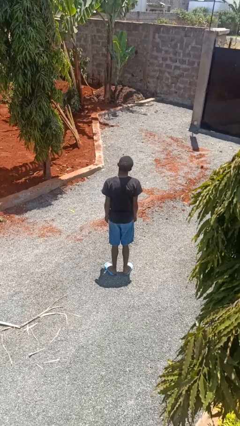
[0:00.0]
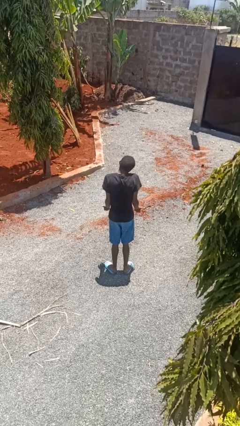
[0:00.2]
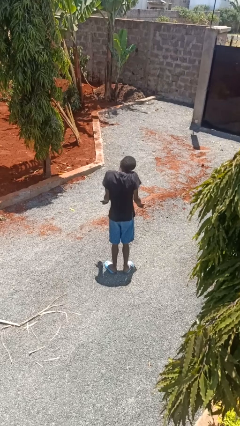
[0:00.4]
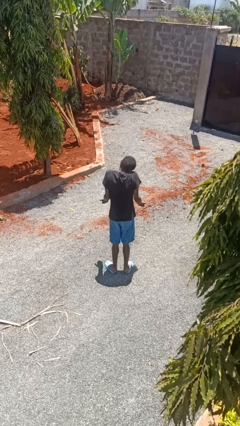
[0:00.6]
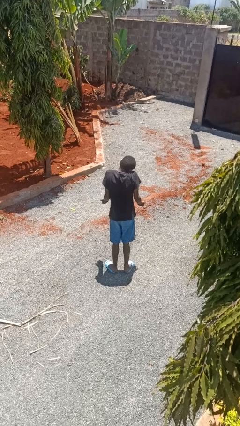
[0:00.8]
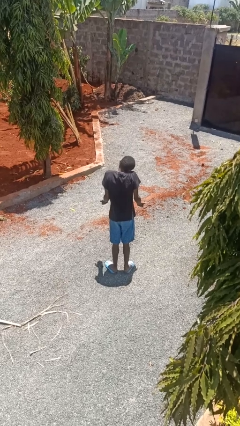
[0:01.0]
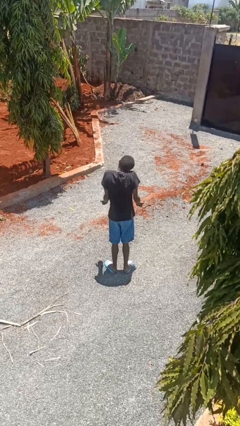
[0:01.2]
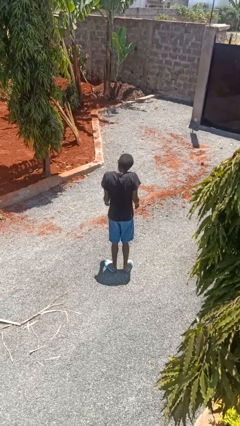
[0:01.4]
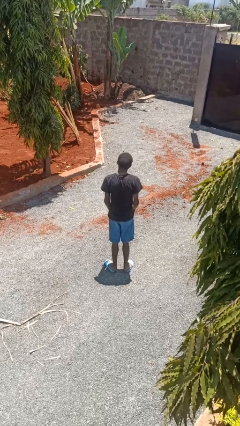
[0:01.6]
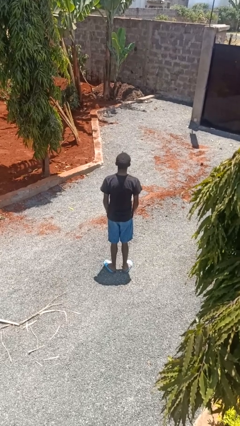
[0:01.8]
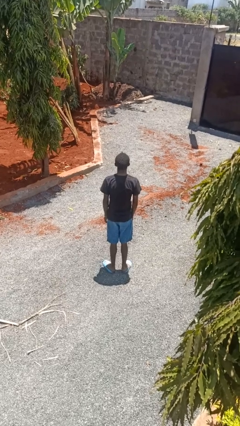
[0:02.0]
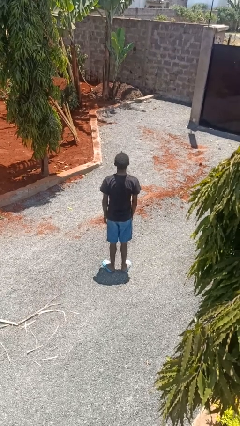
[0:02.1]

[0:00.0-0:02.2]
person shrugs

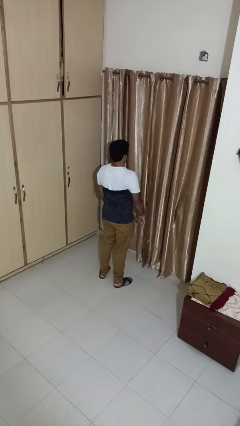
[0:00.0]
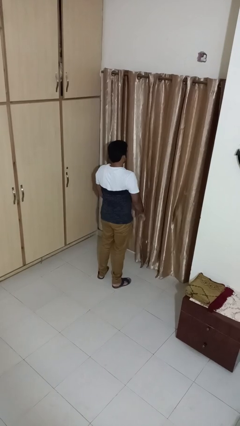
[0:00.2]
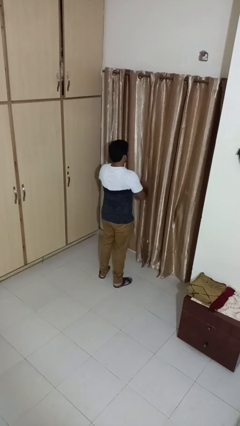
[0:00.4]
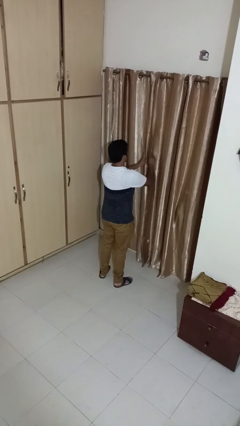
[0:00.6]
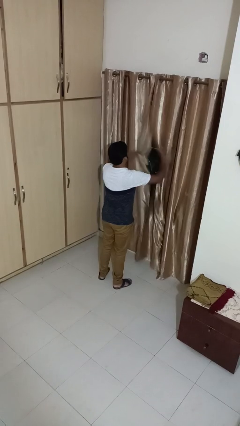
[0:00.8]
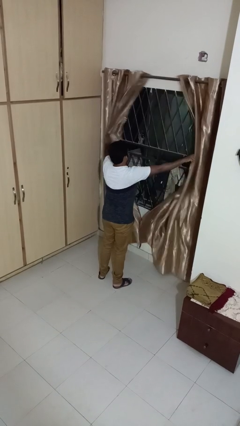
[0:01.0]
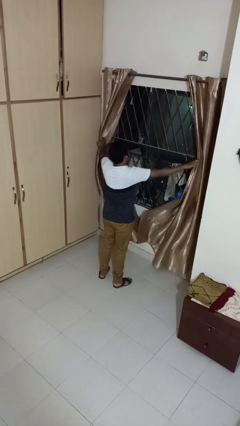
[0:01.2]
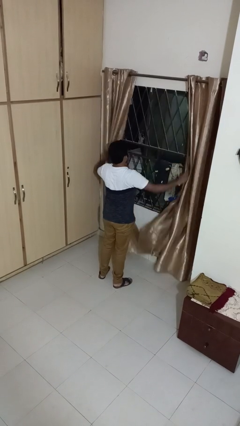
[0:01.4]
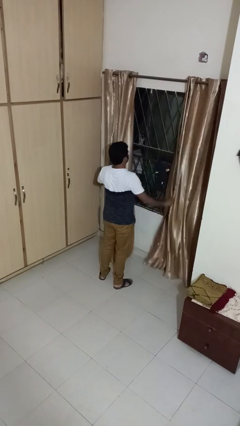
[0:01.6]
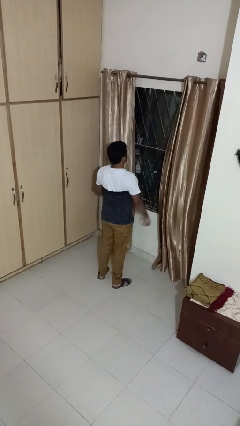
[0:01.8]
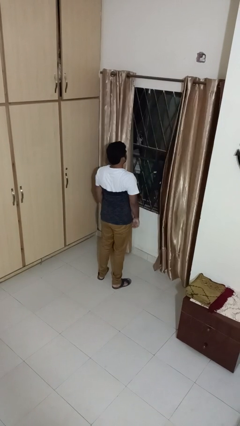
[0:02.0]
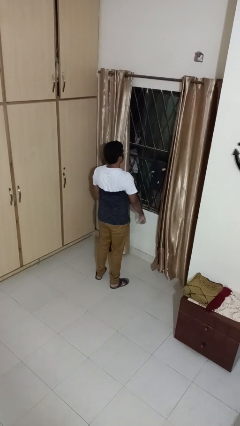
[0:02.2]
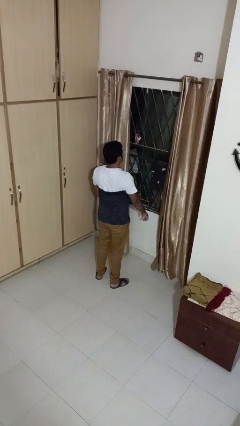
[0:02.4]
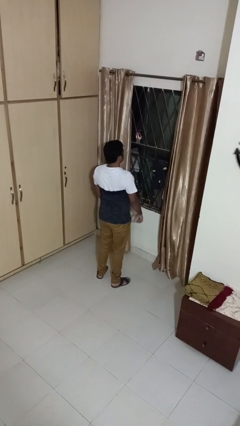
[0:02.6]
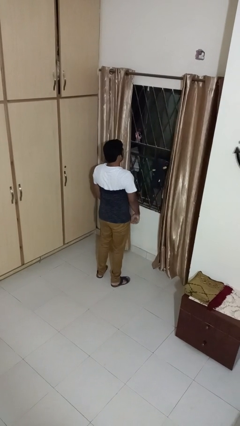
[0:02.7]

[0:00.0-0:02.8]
person opens curtains

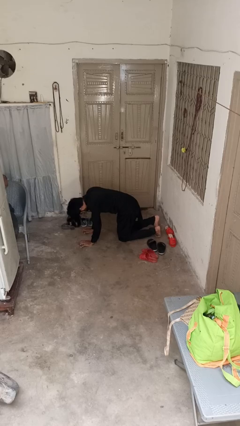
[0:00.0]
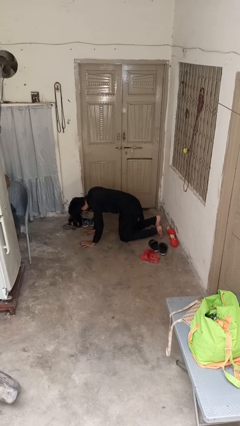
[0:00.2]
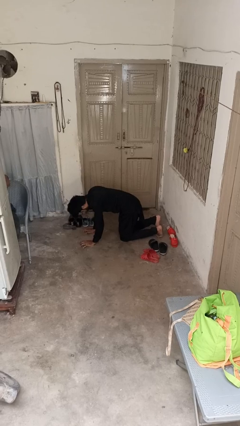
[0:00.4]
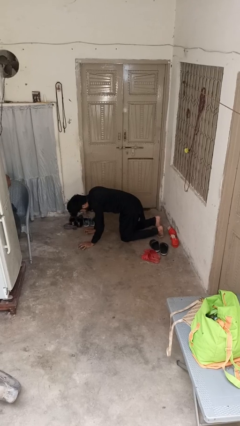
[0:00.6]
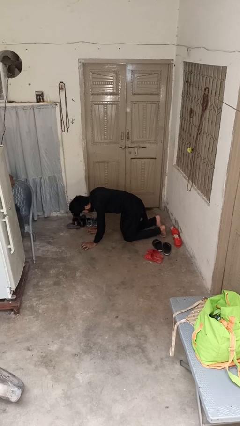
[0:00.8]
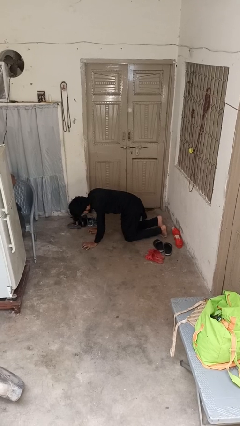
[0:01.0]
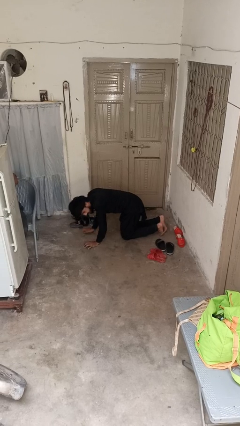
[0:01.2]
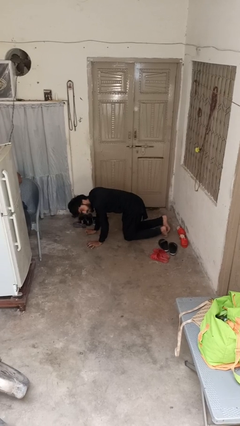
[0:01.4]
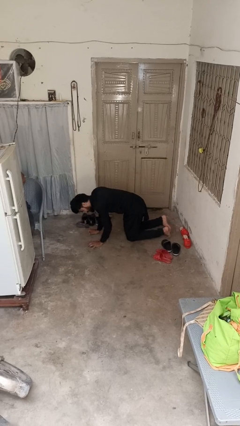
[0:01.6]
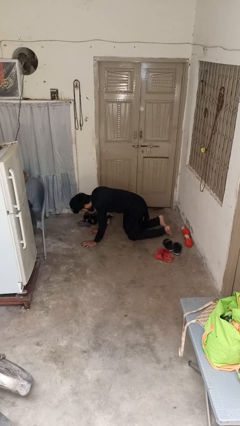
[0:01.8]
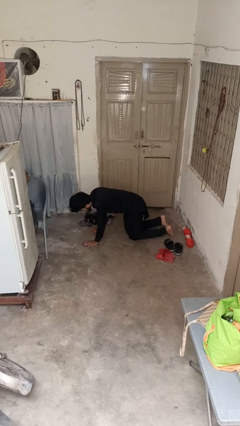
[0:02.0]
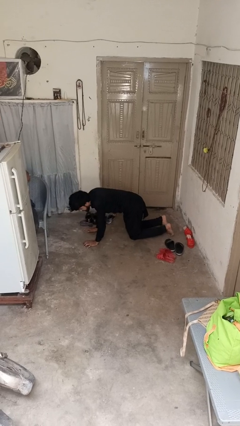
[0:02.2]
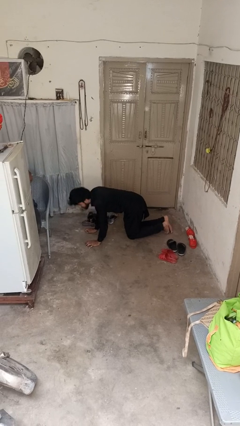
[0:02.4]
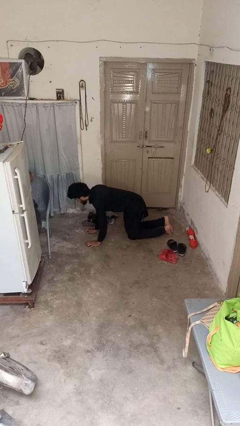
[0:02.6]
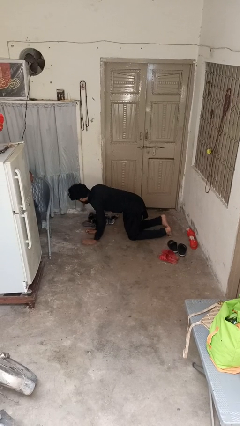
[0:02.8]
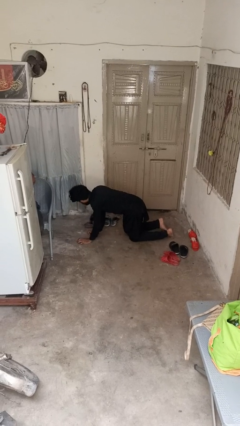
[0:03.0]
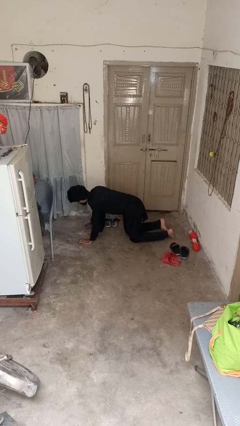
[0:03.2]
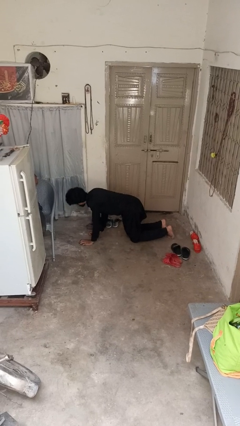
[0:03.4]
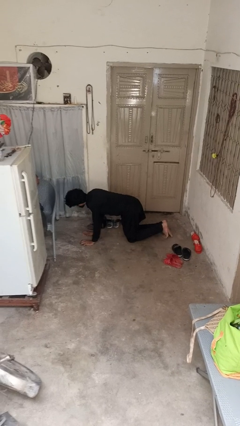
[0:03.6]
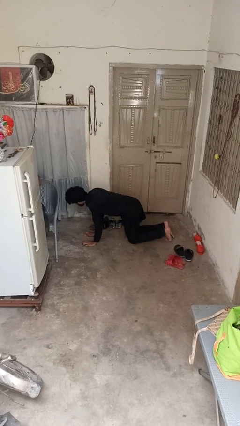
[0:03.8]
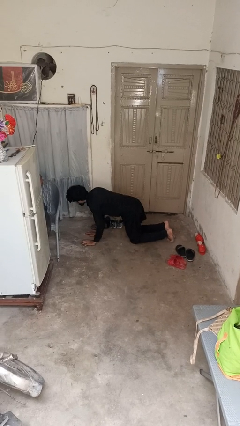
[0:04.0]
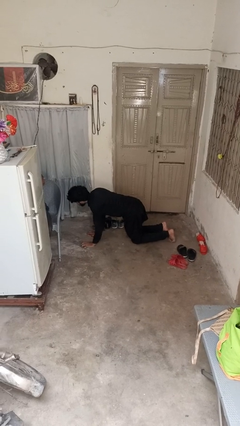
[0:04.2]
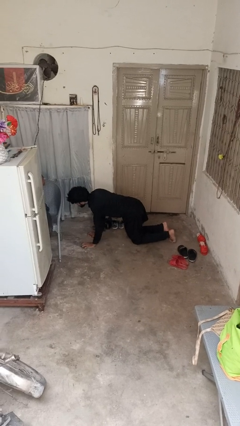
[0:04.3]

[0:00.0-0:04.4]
person crawls

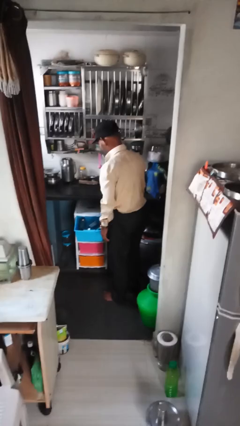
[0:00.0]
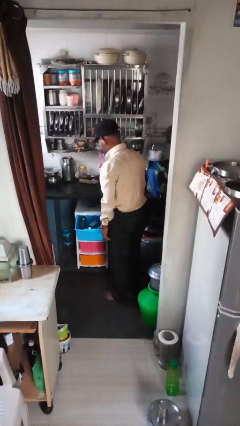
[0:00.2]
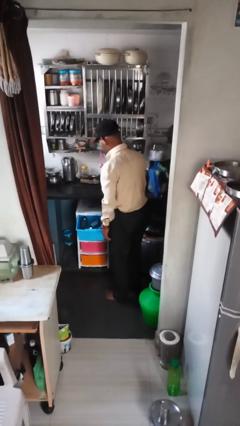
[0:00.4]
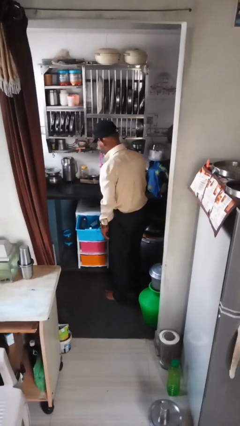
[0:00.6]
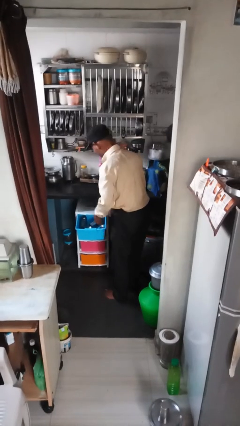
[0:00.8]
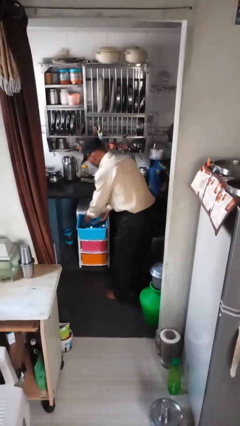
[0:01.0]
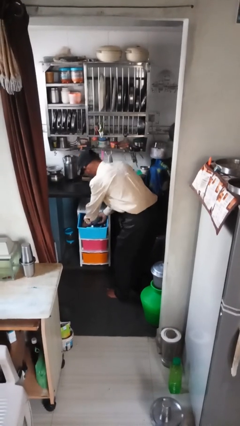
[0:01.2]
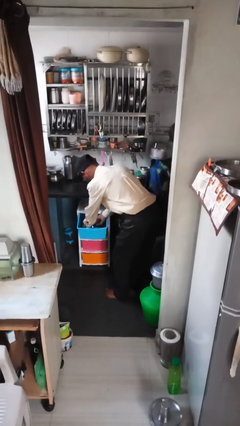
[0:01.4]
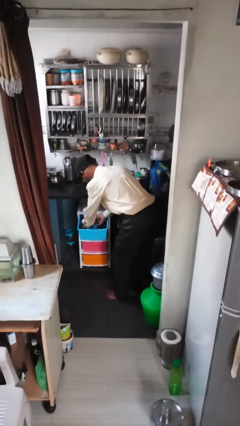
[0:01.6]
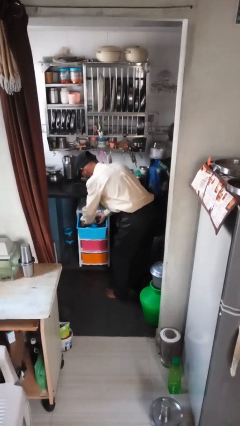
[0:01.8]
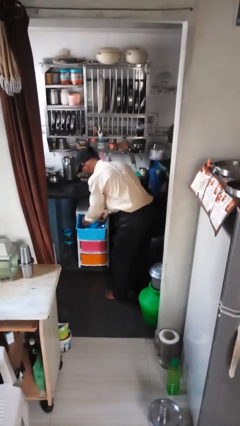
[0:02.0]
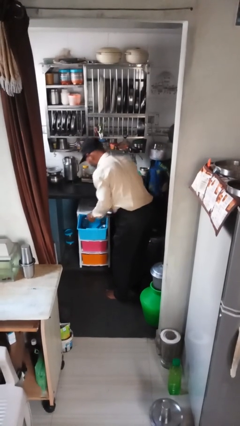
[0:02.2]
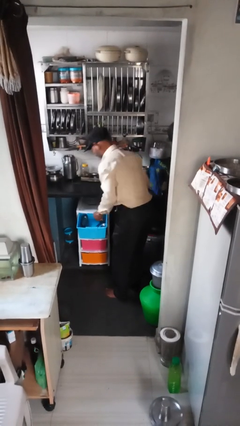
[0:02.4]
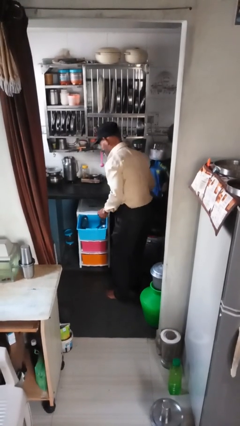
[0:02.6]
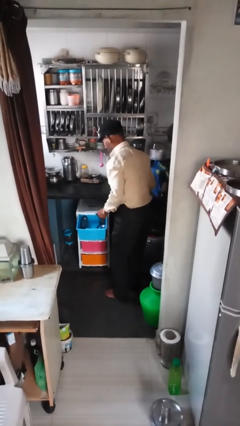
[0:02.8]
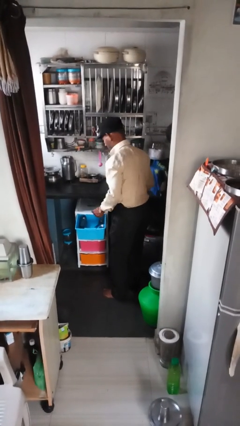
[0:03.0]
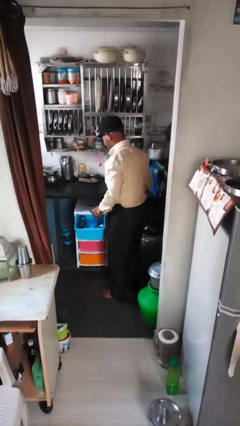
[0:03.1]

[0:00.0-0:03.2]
person takes object from kitchen drawer

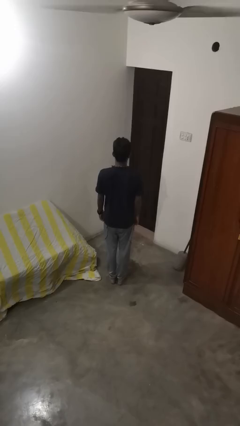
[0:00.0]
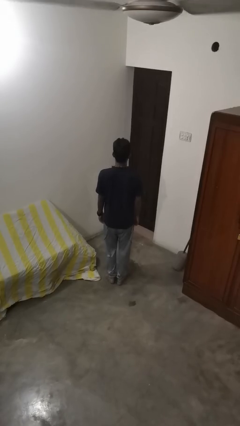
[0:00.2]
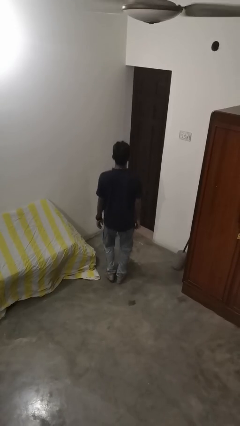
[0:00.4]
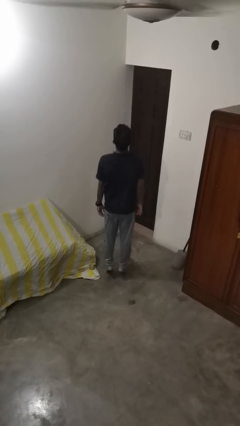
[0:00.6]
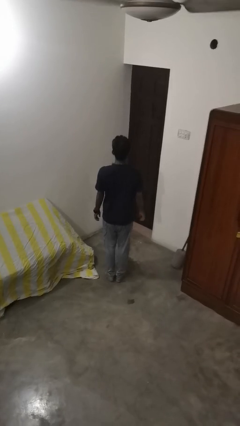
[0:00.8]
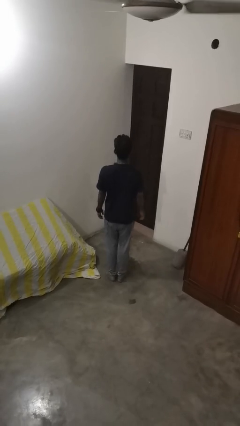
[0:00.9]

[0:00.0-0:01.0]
person jumps

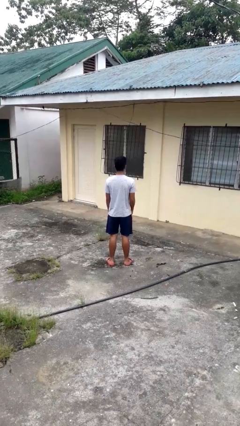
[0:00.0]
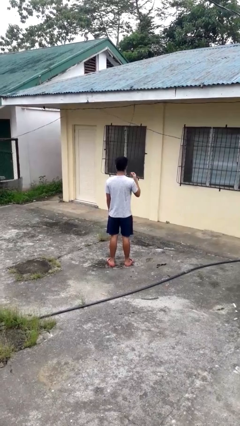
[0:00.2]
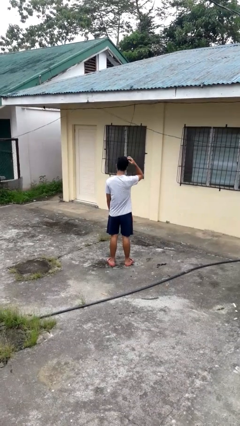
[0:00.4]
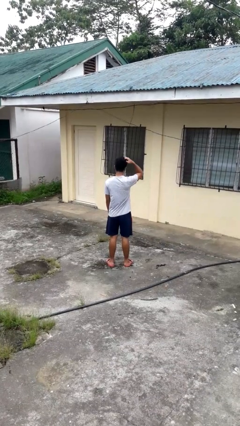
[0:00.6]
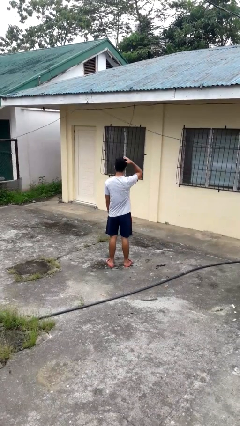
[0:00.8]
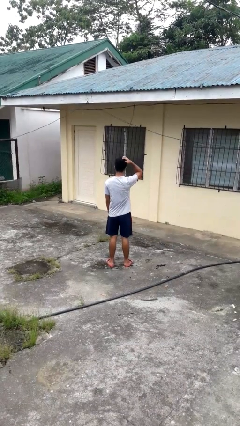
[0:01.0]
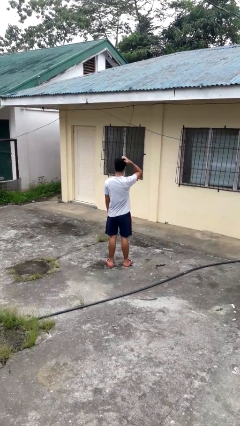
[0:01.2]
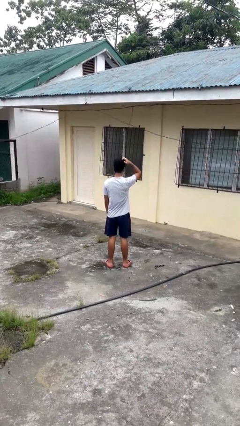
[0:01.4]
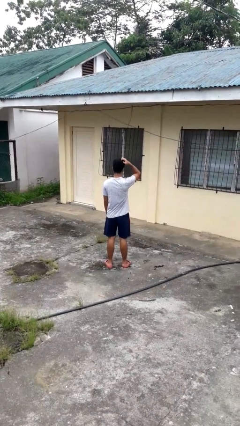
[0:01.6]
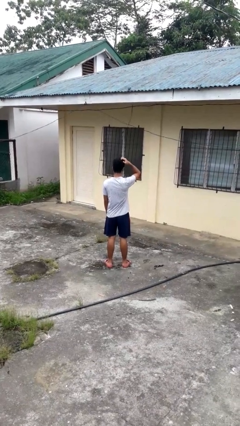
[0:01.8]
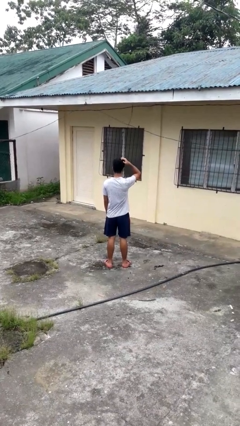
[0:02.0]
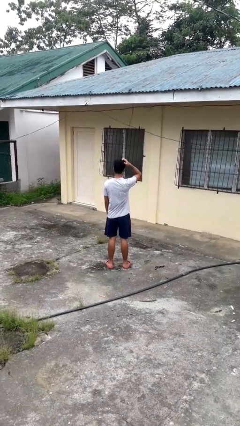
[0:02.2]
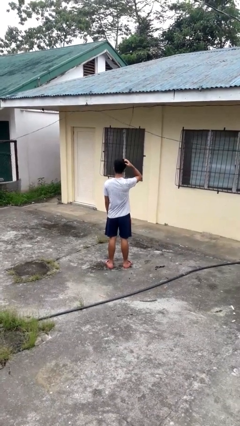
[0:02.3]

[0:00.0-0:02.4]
person scratches face

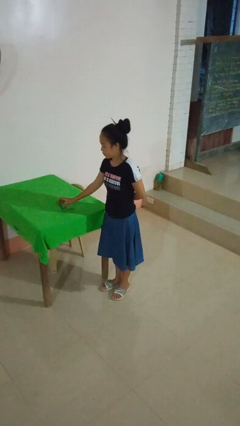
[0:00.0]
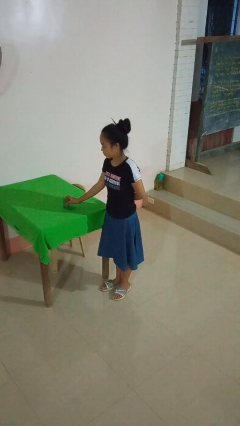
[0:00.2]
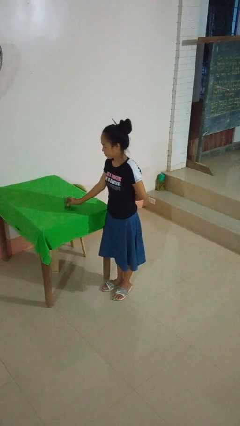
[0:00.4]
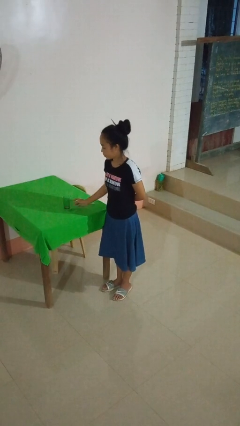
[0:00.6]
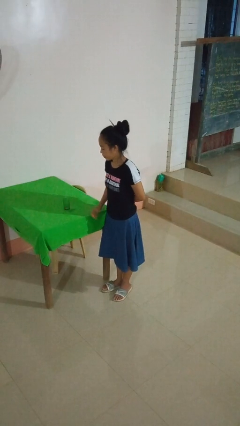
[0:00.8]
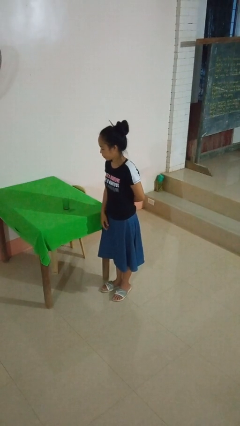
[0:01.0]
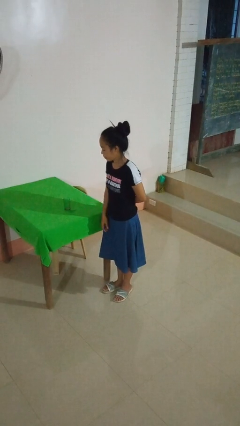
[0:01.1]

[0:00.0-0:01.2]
person sets upright glass

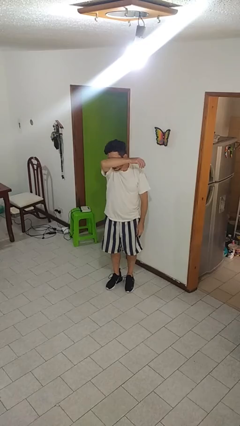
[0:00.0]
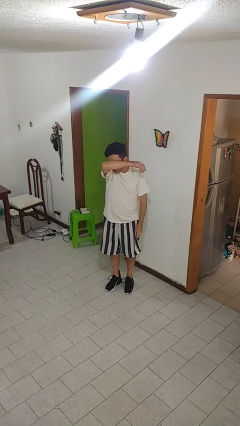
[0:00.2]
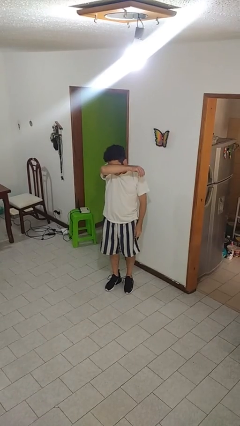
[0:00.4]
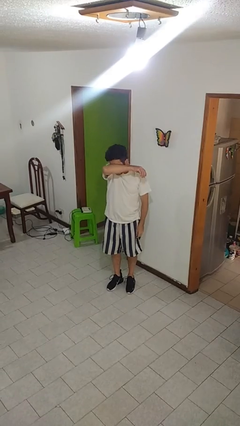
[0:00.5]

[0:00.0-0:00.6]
person sneezes into arm
